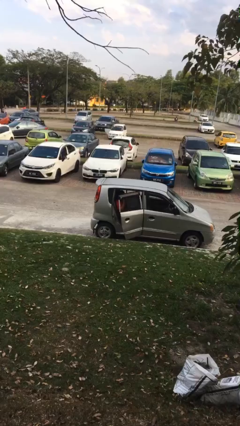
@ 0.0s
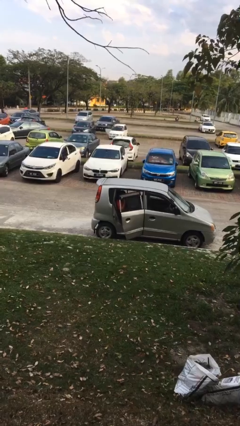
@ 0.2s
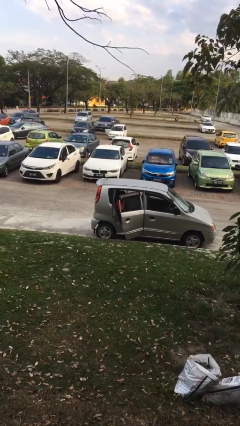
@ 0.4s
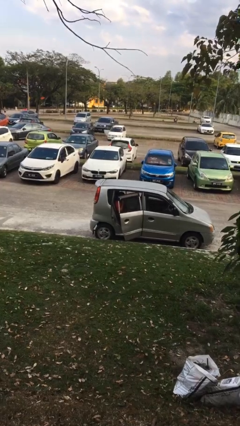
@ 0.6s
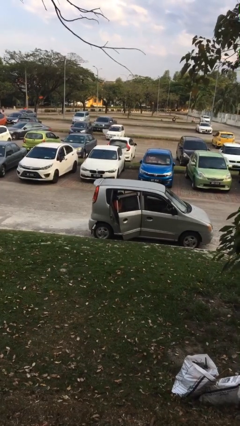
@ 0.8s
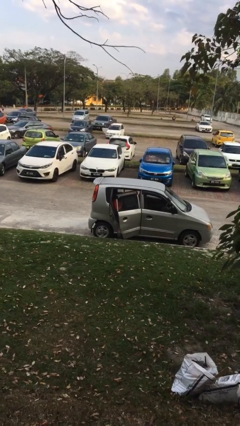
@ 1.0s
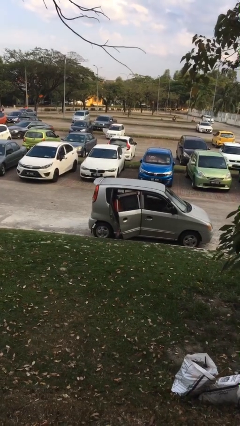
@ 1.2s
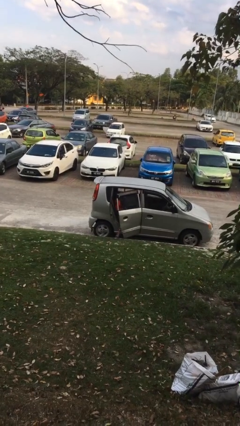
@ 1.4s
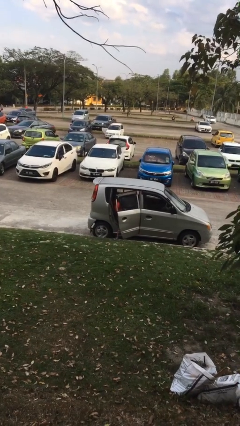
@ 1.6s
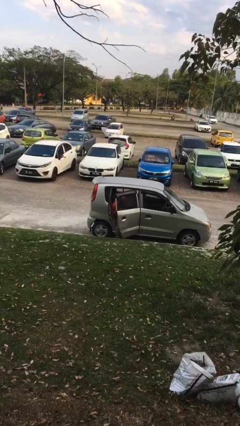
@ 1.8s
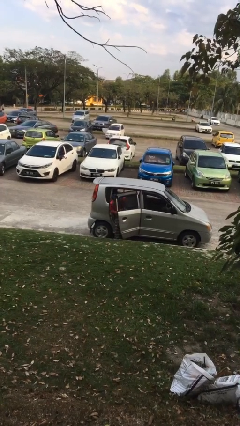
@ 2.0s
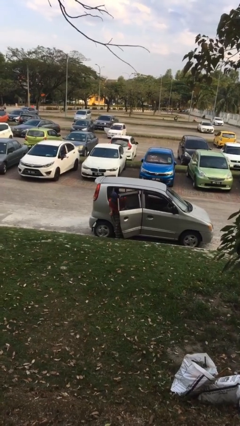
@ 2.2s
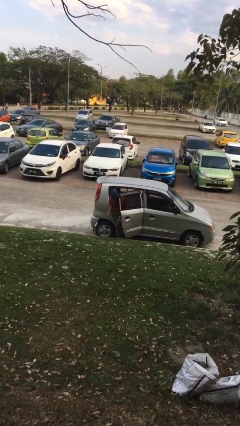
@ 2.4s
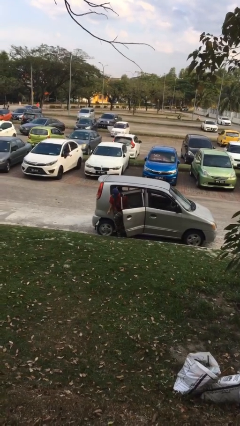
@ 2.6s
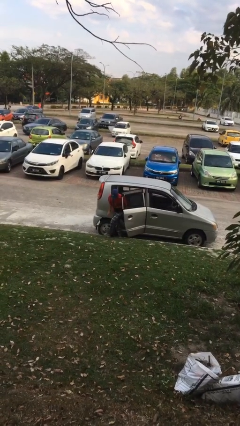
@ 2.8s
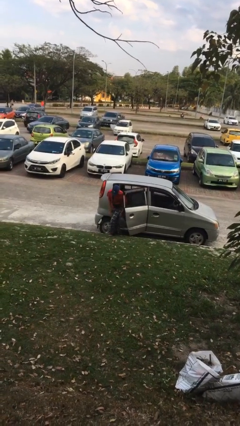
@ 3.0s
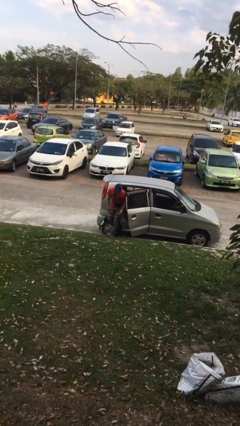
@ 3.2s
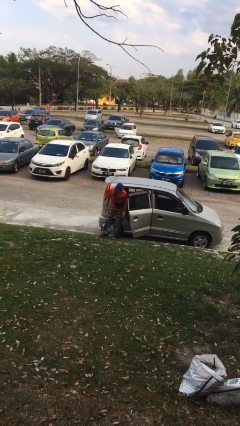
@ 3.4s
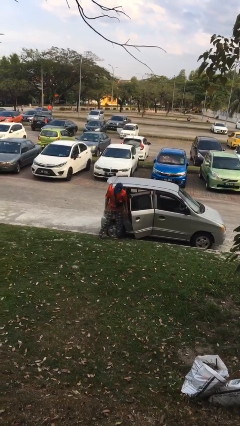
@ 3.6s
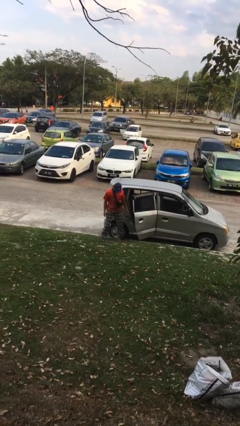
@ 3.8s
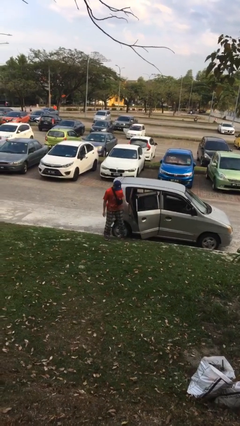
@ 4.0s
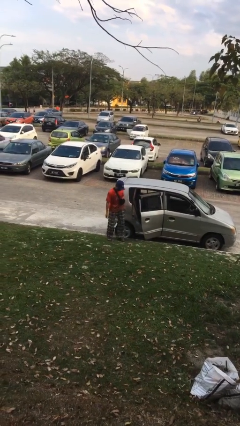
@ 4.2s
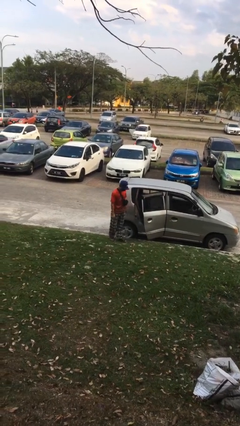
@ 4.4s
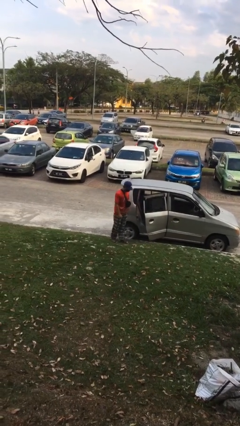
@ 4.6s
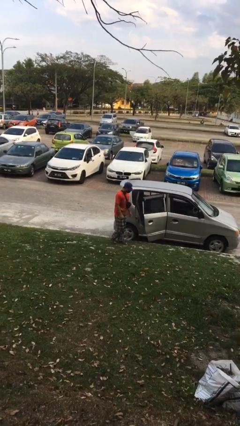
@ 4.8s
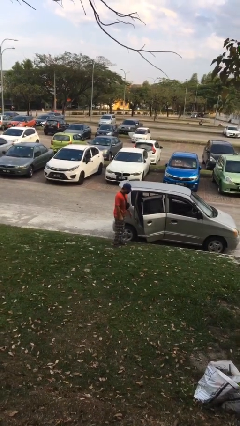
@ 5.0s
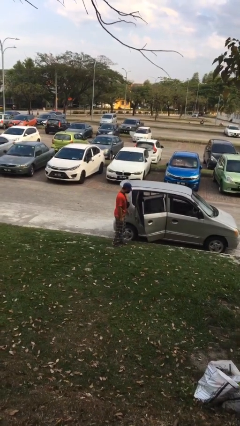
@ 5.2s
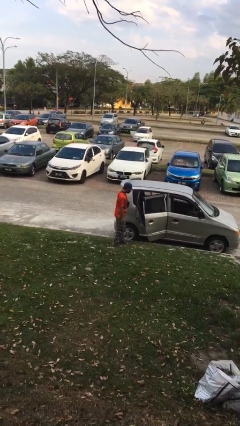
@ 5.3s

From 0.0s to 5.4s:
person exits car

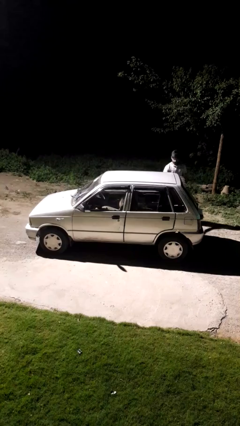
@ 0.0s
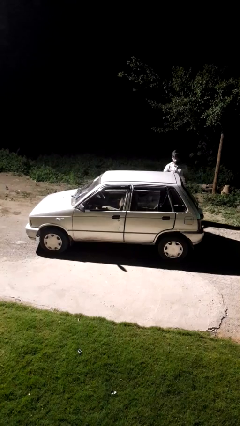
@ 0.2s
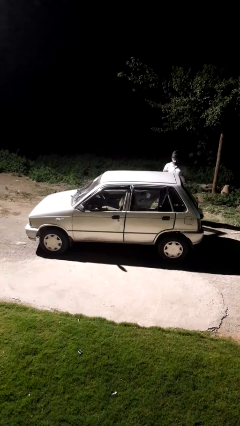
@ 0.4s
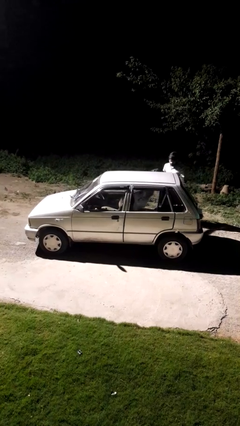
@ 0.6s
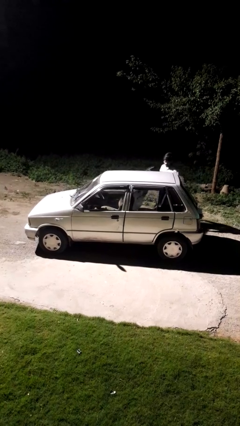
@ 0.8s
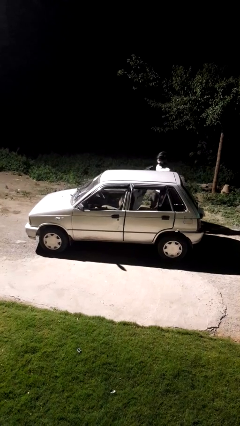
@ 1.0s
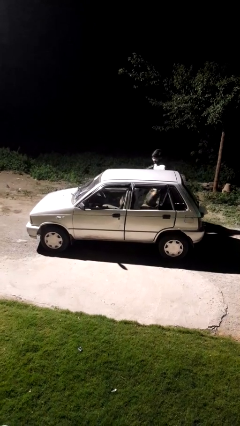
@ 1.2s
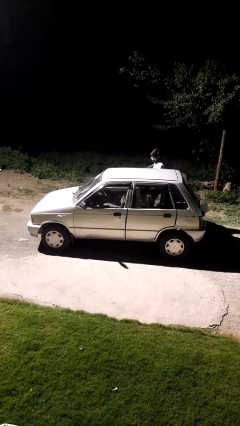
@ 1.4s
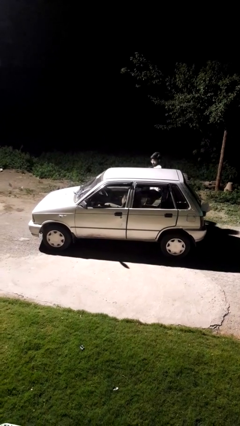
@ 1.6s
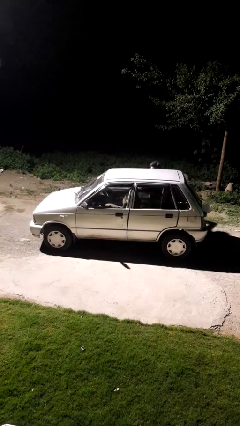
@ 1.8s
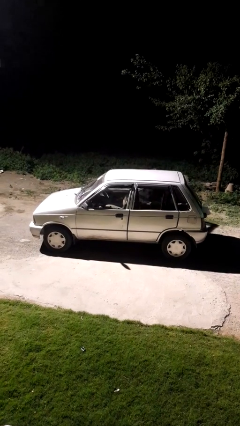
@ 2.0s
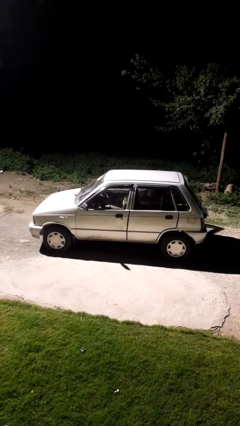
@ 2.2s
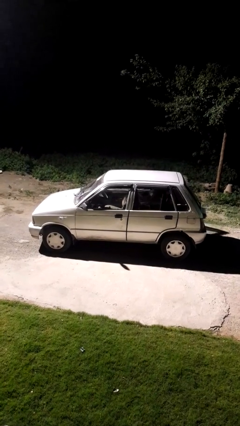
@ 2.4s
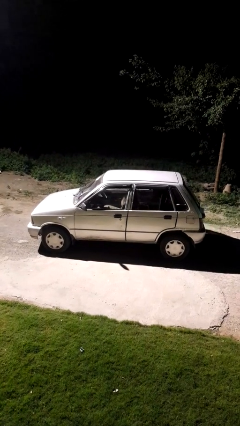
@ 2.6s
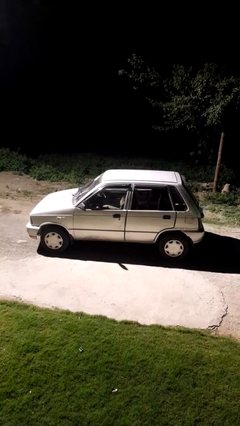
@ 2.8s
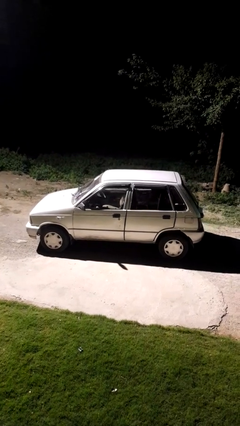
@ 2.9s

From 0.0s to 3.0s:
car picks up person

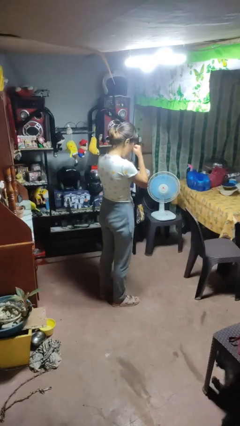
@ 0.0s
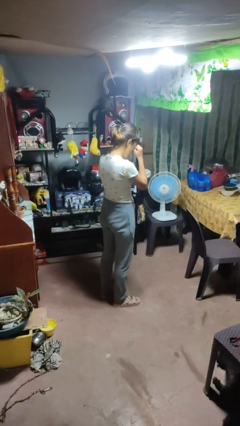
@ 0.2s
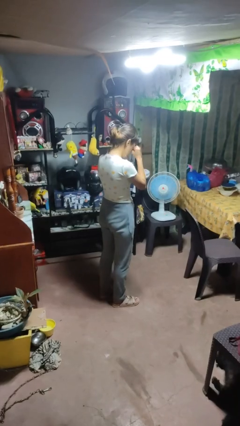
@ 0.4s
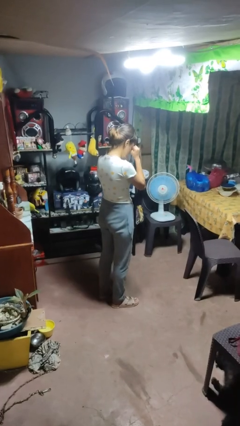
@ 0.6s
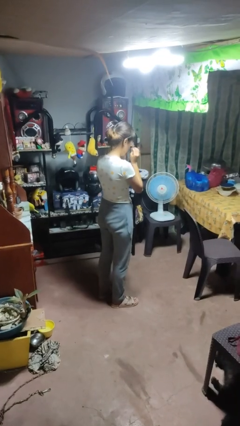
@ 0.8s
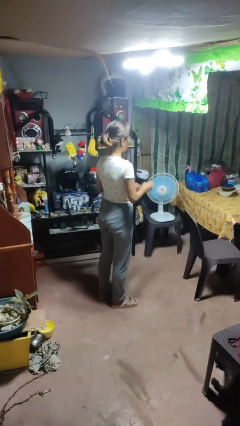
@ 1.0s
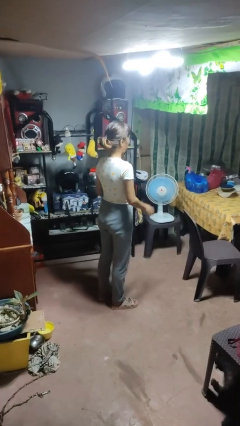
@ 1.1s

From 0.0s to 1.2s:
person rubs eyes

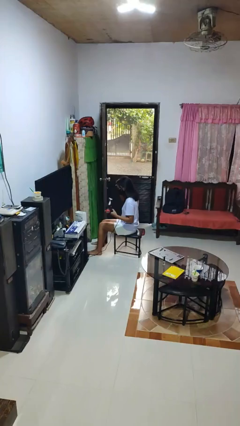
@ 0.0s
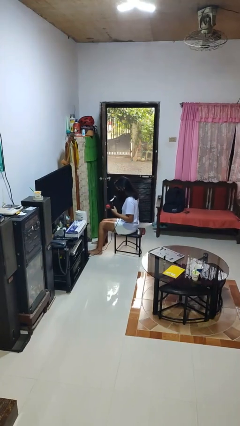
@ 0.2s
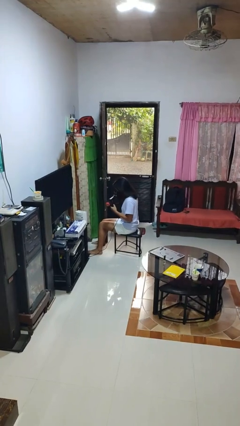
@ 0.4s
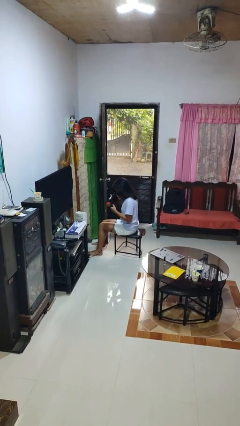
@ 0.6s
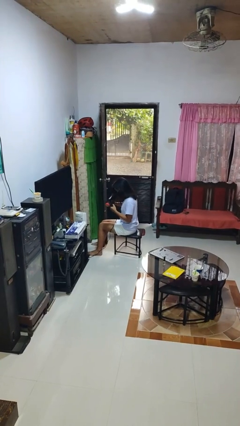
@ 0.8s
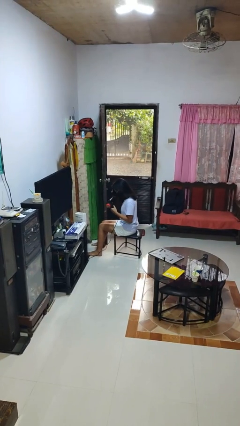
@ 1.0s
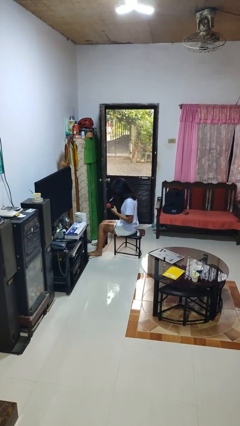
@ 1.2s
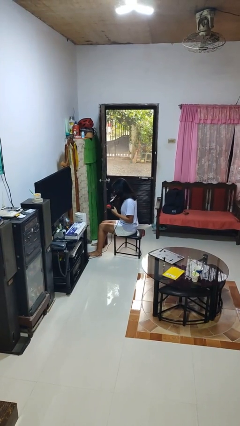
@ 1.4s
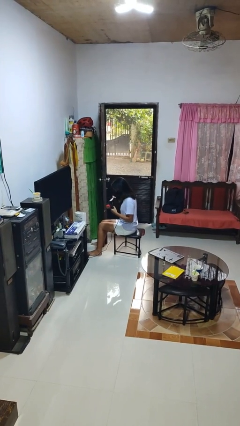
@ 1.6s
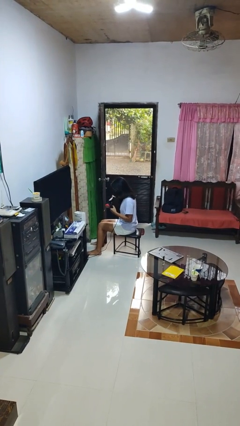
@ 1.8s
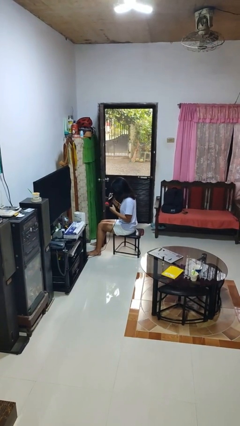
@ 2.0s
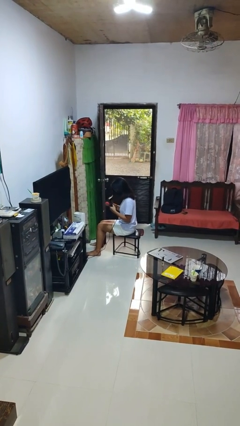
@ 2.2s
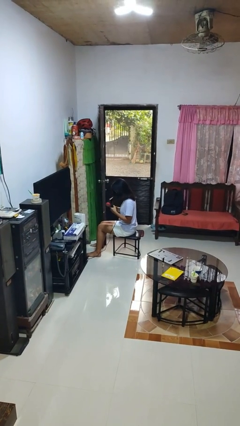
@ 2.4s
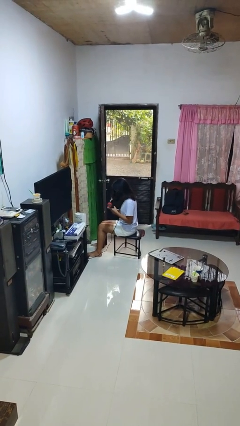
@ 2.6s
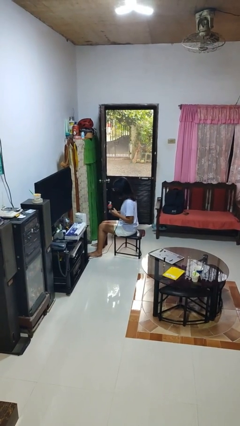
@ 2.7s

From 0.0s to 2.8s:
person dries hair with hairdryer

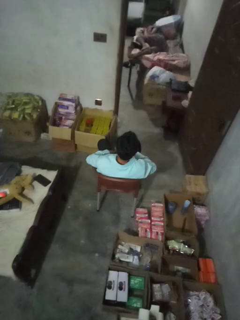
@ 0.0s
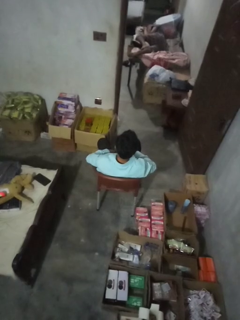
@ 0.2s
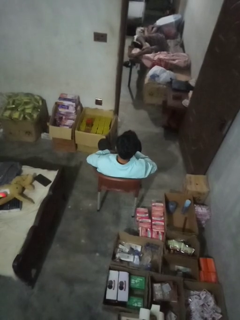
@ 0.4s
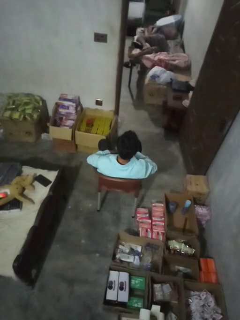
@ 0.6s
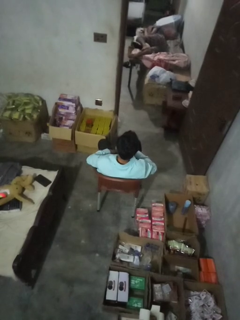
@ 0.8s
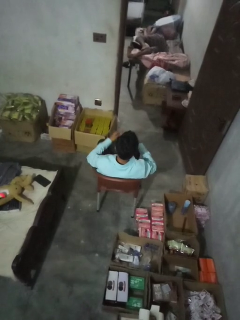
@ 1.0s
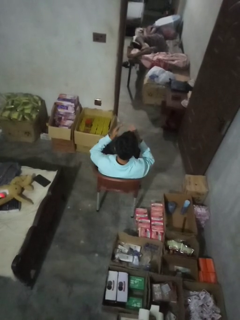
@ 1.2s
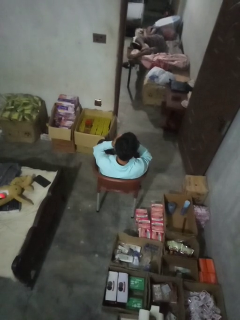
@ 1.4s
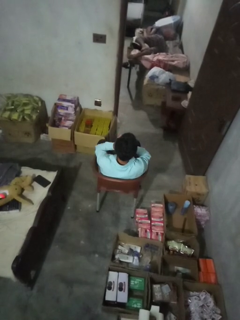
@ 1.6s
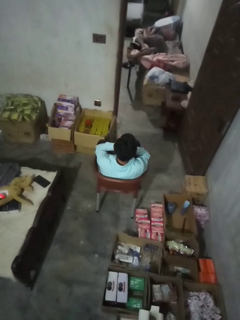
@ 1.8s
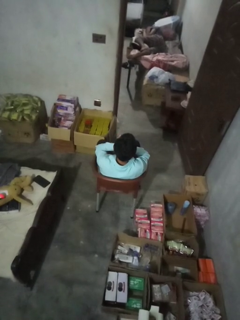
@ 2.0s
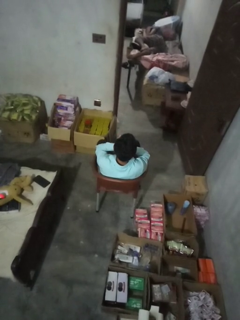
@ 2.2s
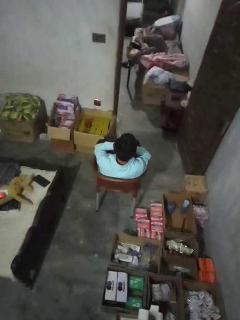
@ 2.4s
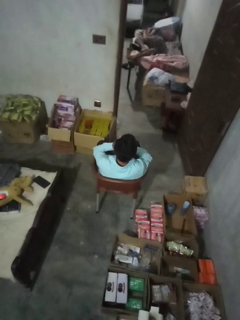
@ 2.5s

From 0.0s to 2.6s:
person covers face with hands

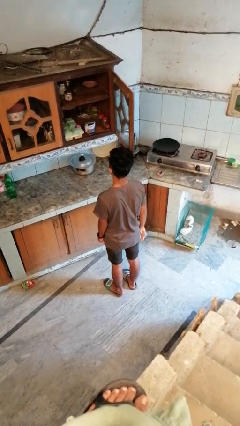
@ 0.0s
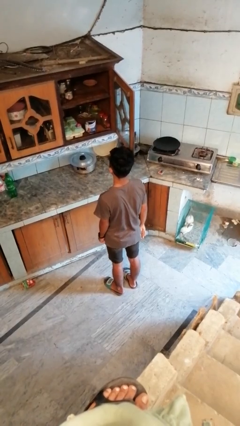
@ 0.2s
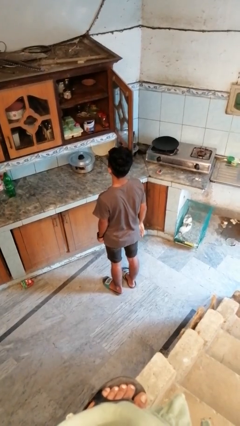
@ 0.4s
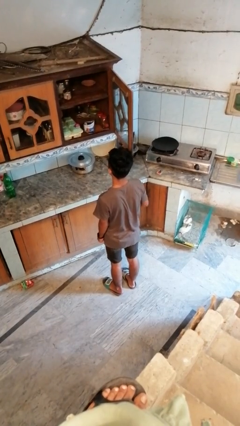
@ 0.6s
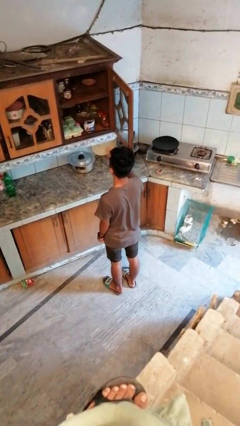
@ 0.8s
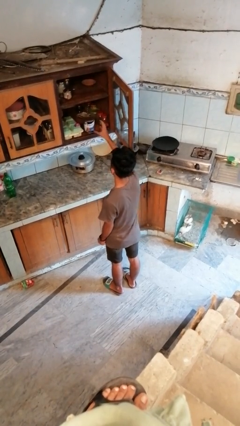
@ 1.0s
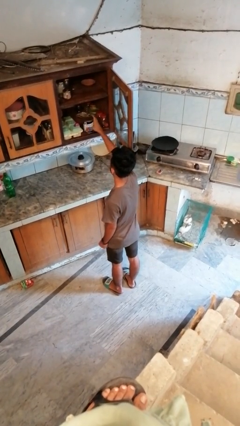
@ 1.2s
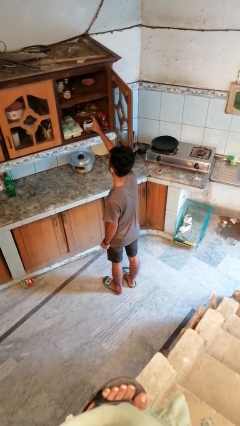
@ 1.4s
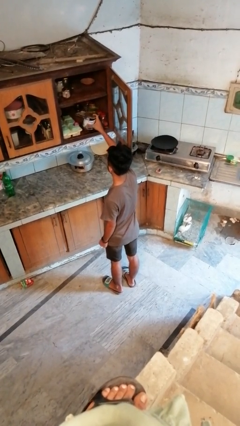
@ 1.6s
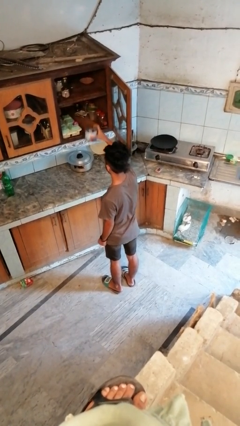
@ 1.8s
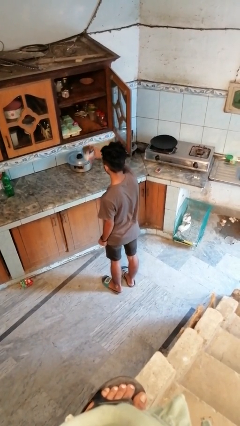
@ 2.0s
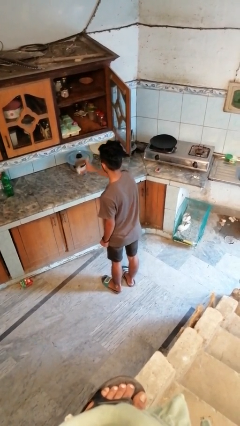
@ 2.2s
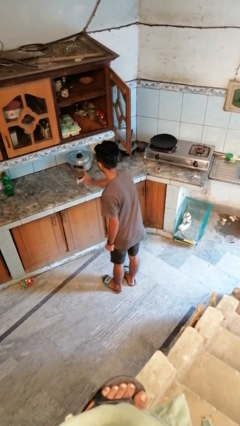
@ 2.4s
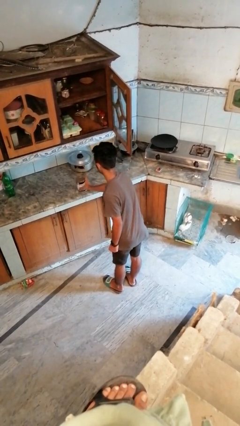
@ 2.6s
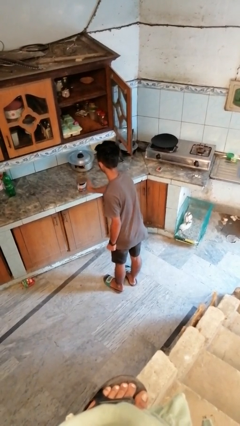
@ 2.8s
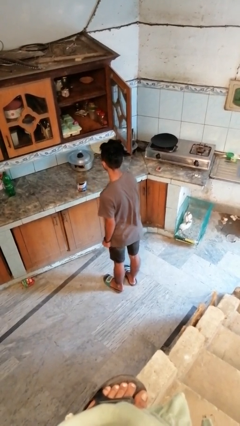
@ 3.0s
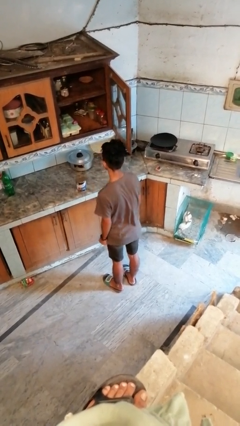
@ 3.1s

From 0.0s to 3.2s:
person takes object from cabinet

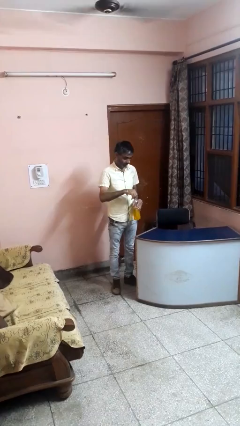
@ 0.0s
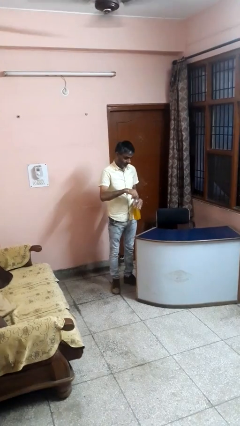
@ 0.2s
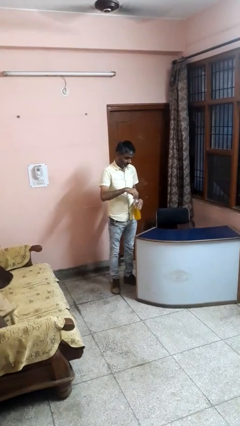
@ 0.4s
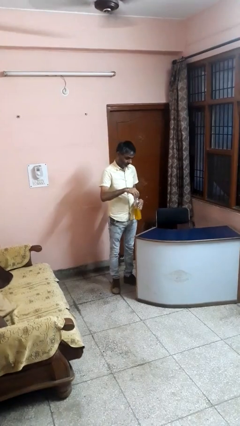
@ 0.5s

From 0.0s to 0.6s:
person unscrews lid from bottle
